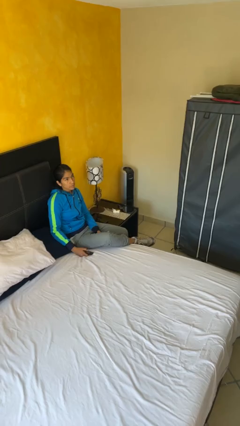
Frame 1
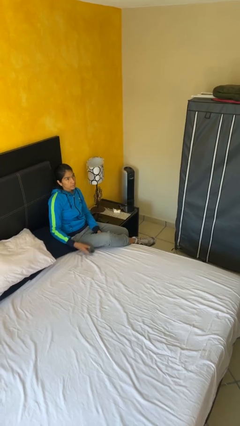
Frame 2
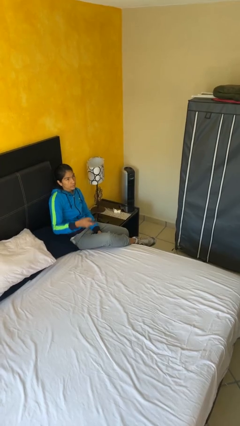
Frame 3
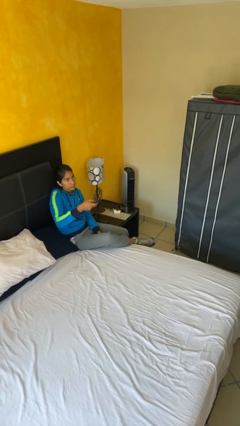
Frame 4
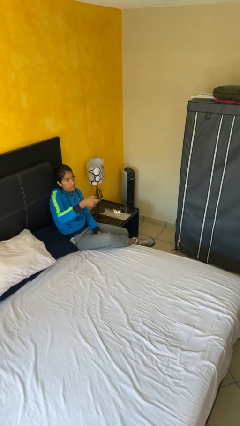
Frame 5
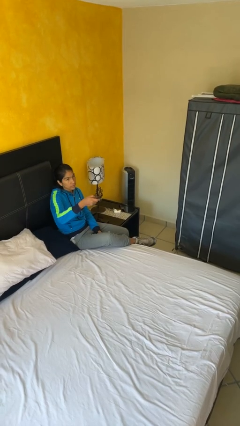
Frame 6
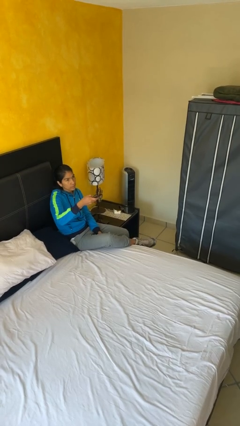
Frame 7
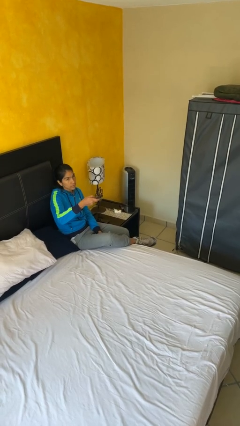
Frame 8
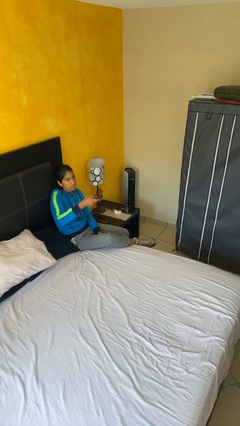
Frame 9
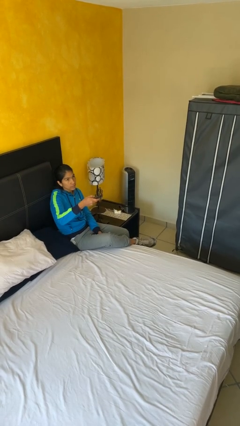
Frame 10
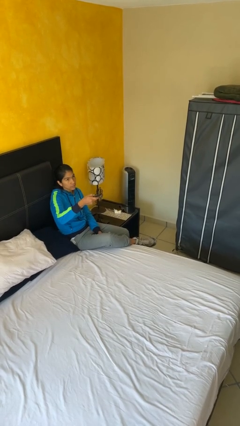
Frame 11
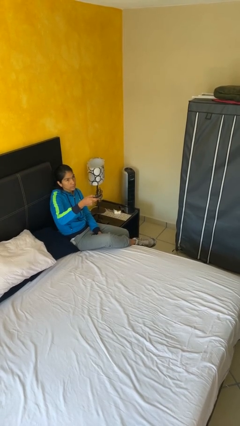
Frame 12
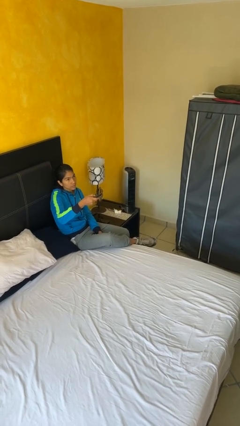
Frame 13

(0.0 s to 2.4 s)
person uses television remote

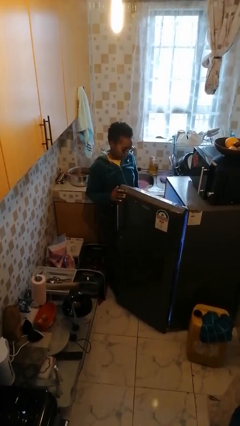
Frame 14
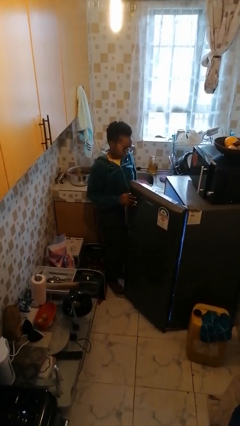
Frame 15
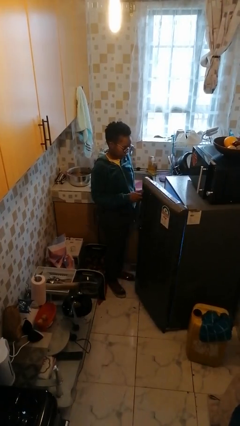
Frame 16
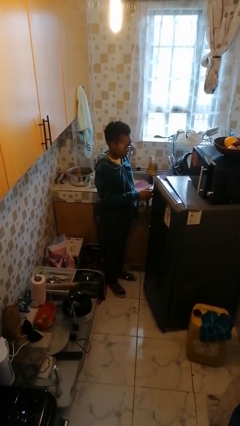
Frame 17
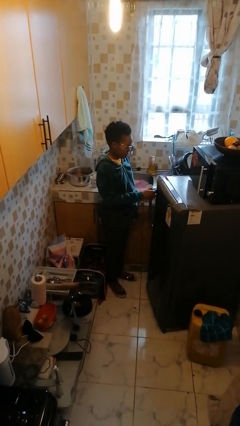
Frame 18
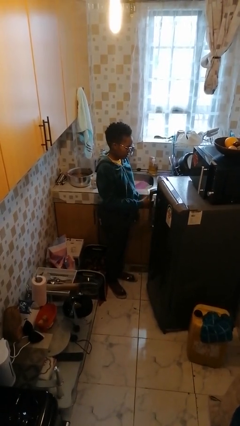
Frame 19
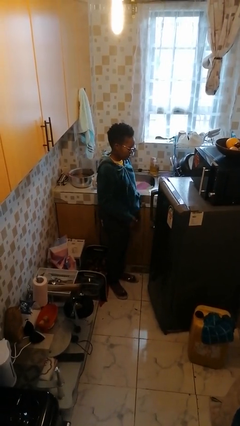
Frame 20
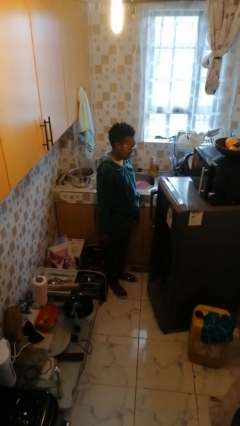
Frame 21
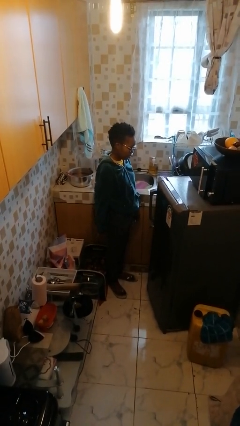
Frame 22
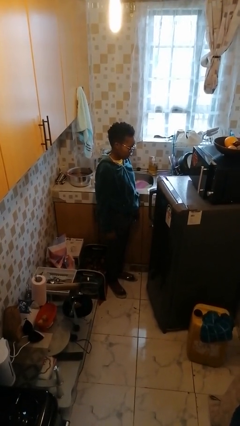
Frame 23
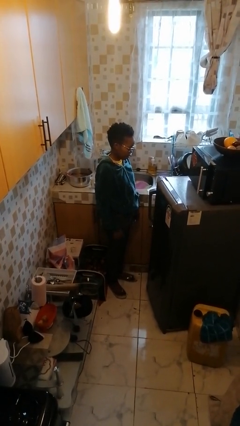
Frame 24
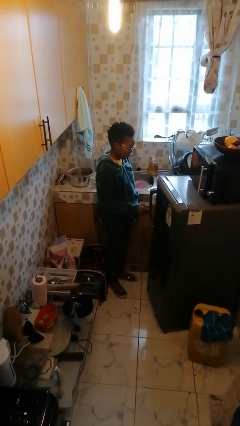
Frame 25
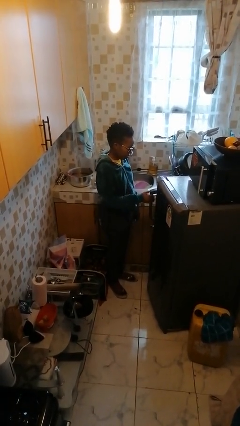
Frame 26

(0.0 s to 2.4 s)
person closes refrigerator

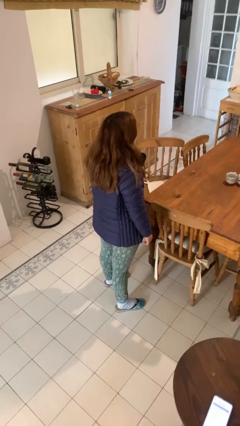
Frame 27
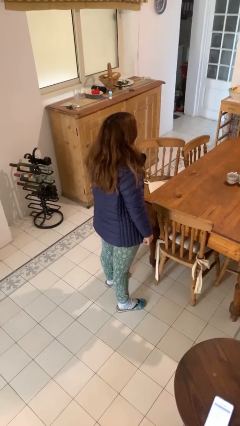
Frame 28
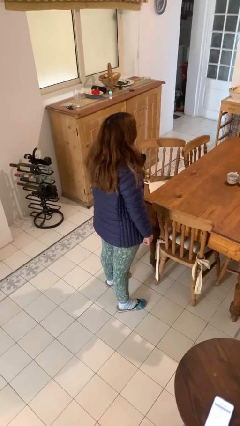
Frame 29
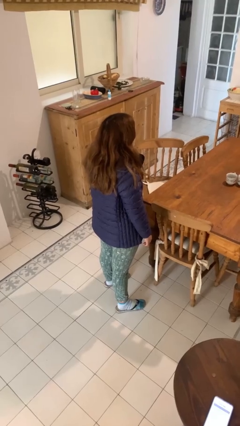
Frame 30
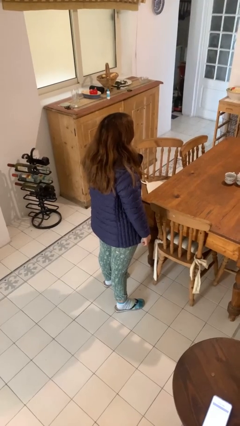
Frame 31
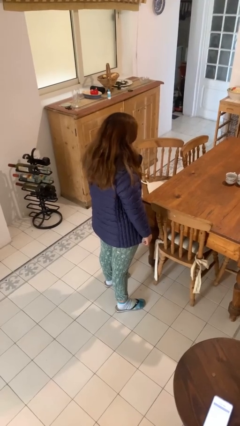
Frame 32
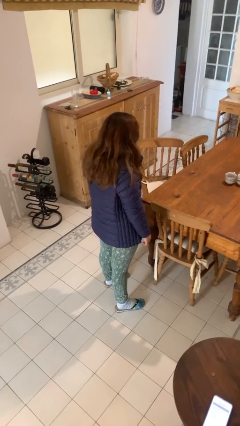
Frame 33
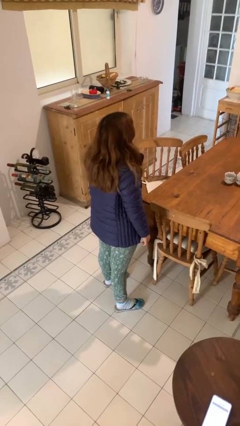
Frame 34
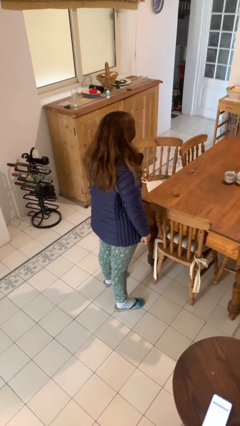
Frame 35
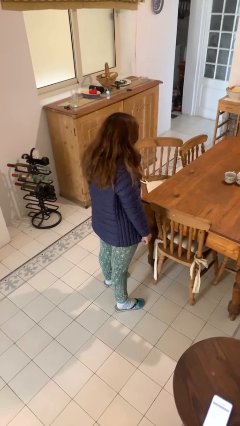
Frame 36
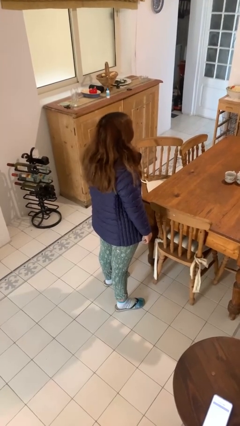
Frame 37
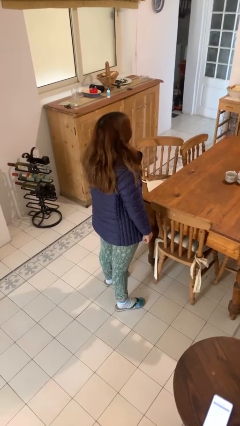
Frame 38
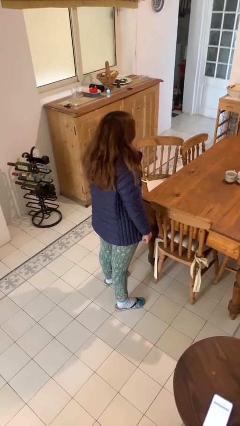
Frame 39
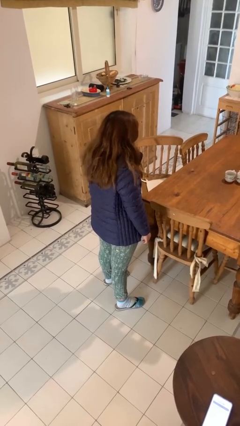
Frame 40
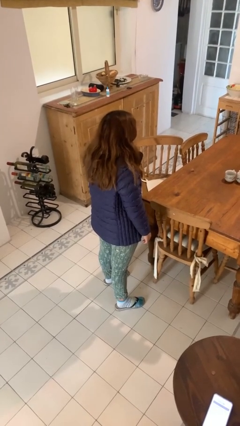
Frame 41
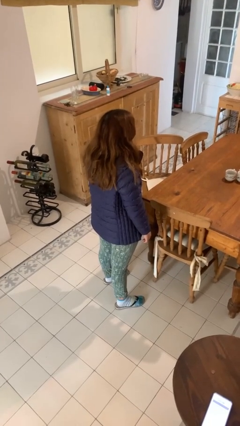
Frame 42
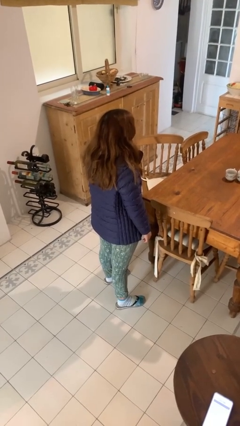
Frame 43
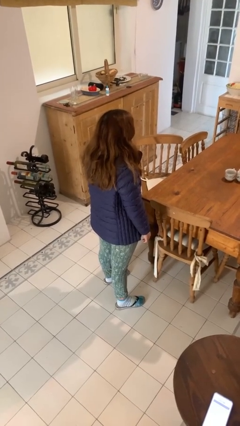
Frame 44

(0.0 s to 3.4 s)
person nods head

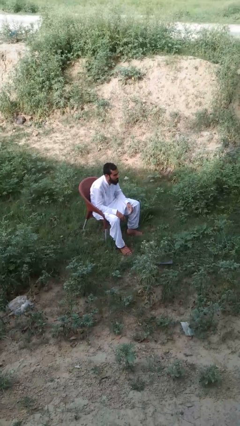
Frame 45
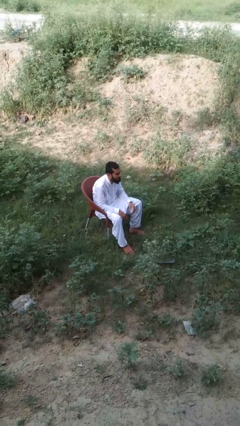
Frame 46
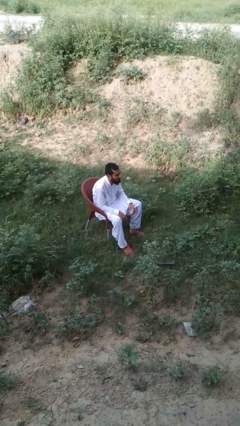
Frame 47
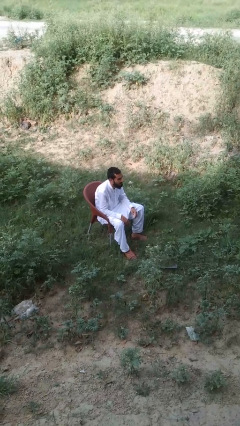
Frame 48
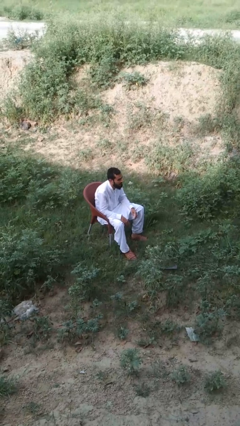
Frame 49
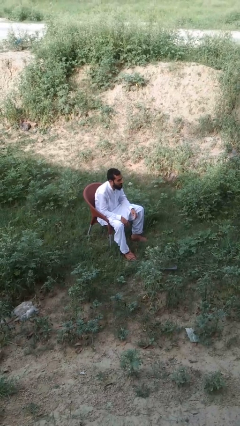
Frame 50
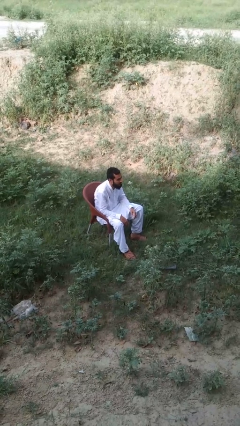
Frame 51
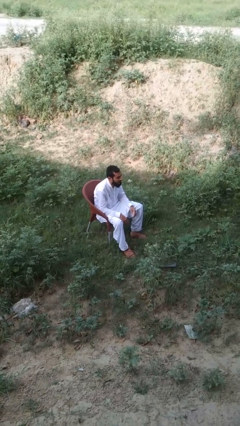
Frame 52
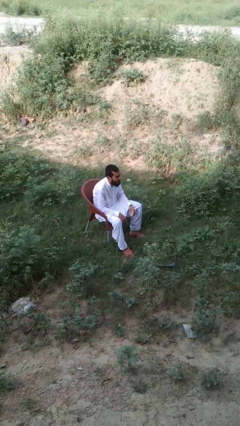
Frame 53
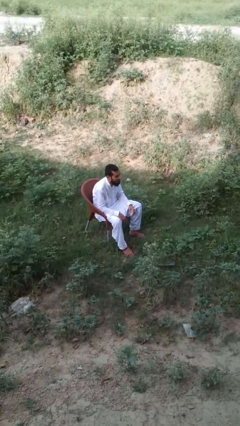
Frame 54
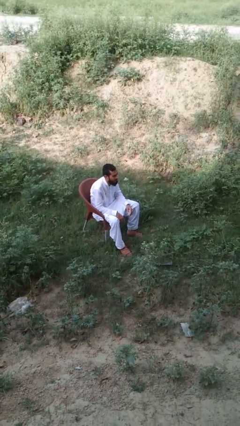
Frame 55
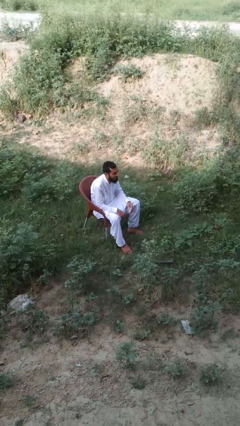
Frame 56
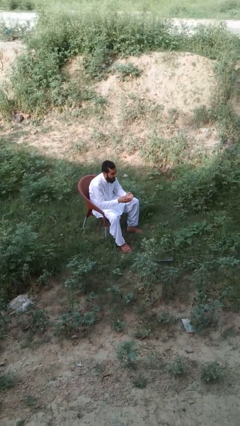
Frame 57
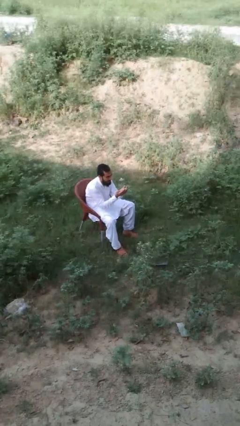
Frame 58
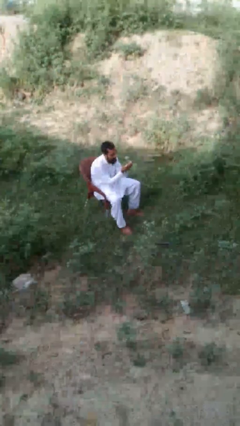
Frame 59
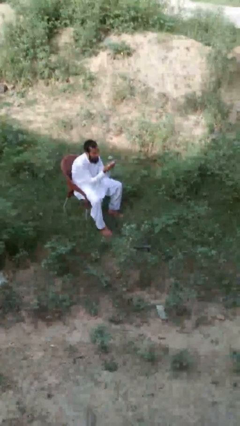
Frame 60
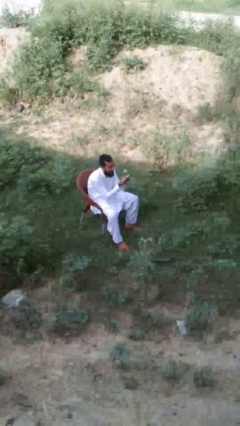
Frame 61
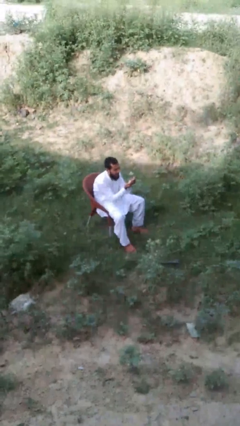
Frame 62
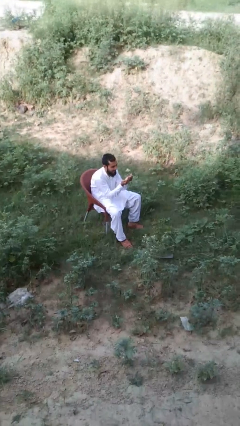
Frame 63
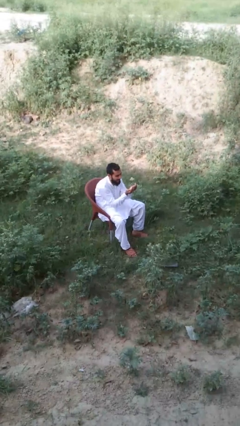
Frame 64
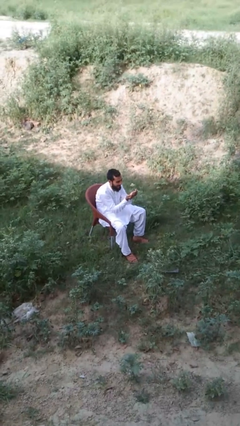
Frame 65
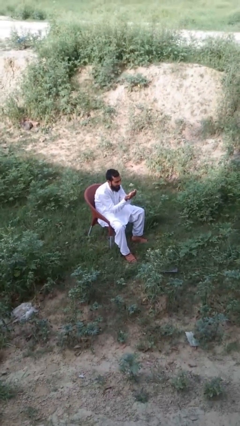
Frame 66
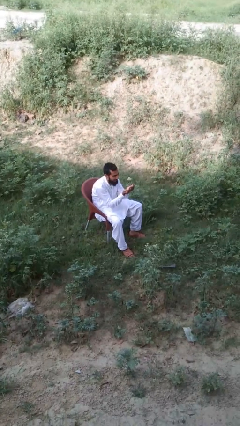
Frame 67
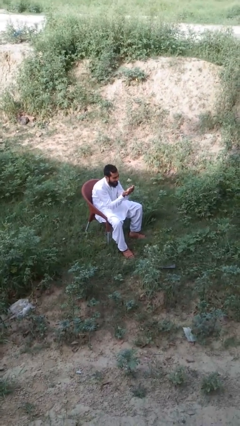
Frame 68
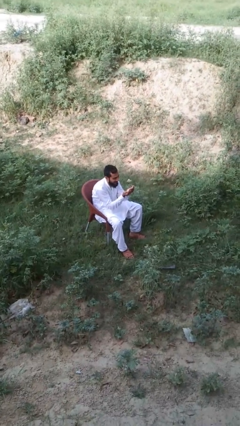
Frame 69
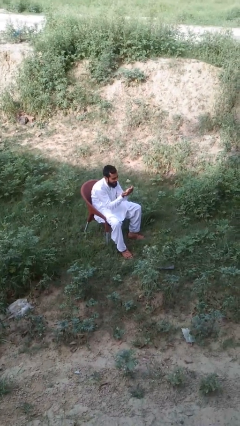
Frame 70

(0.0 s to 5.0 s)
person prays

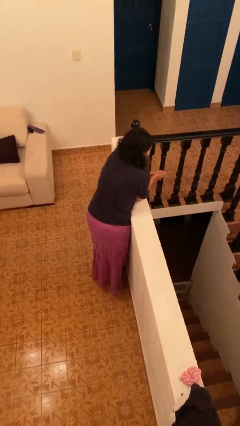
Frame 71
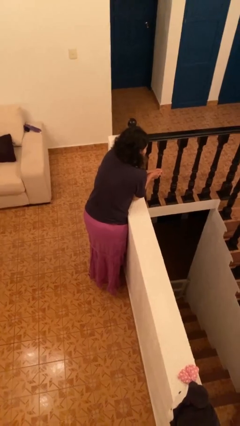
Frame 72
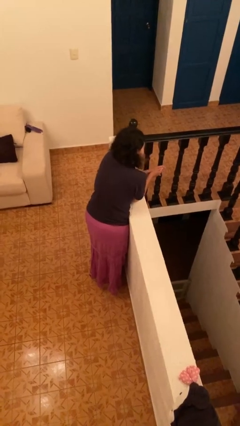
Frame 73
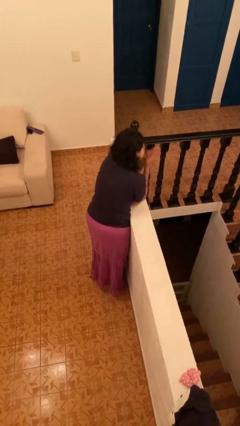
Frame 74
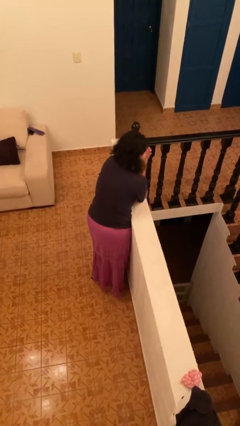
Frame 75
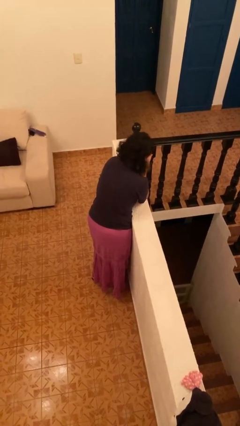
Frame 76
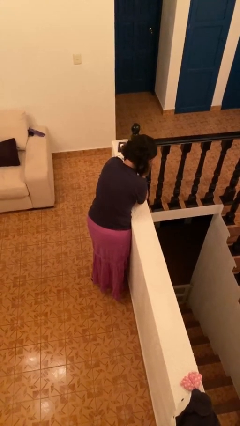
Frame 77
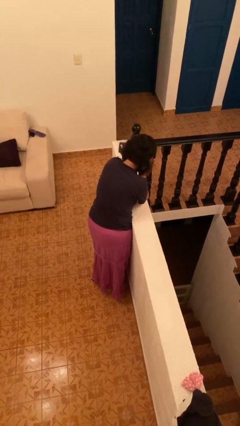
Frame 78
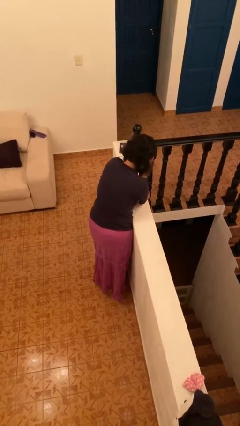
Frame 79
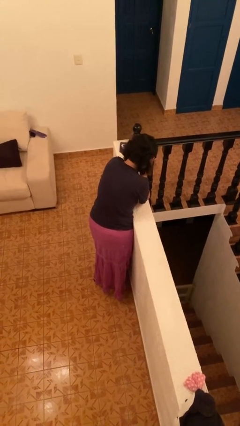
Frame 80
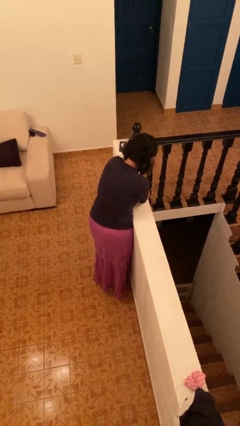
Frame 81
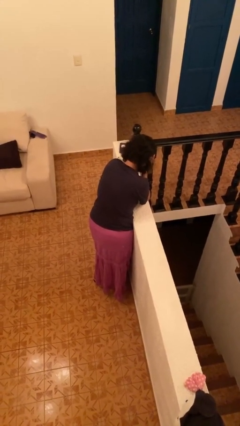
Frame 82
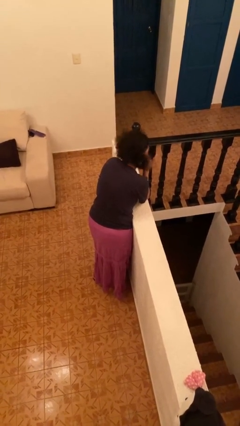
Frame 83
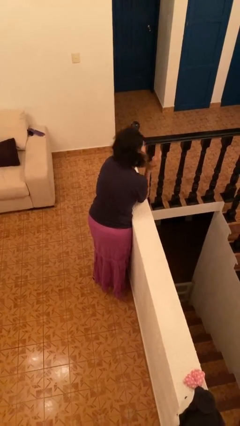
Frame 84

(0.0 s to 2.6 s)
person covers face with hands

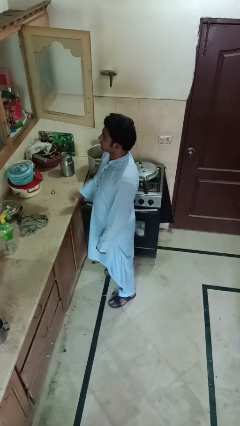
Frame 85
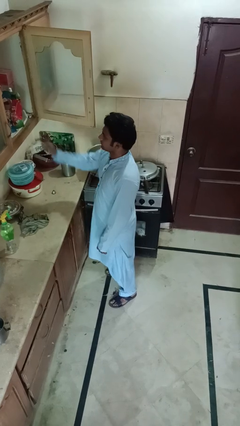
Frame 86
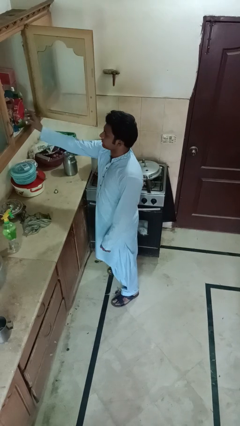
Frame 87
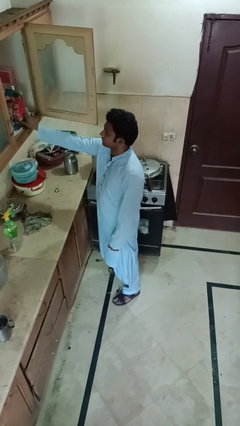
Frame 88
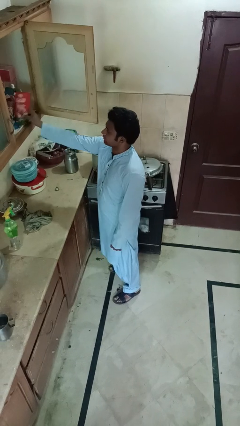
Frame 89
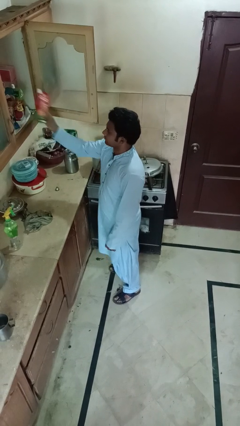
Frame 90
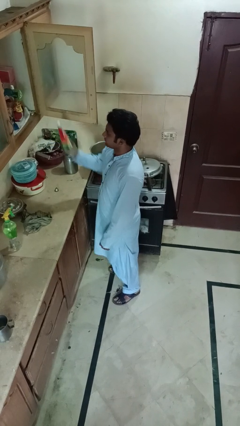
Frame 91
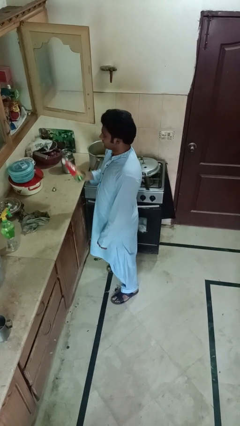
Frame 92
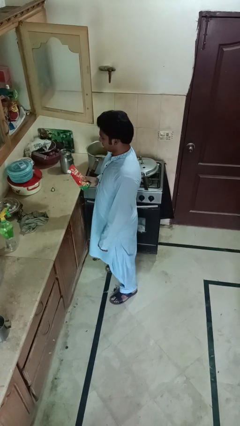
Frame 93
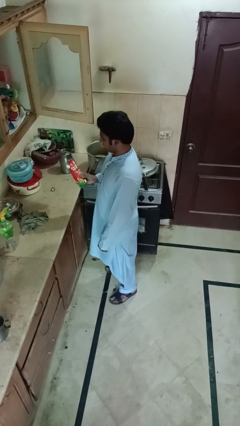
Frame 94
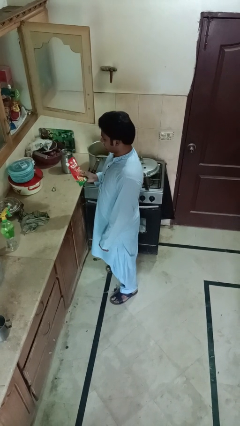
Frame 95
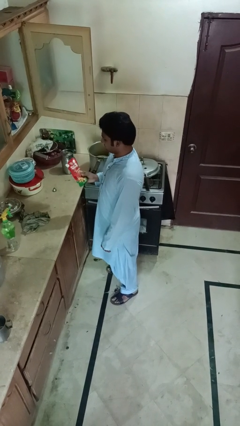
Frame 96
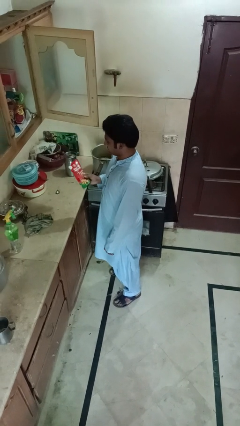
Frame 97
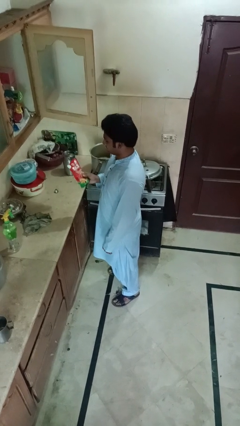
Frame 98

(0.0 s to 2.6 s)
person picks up object from cabinet
